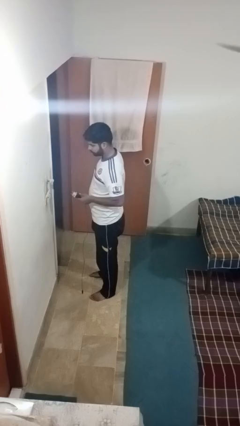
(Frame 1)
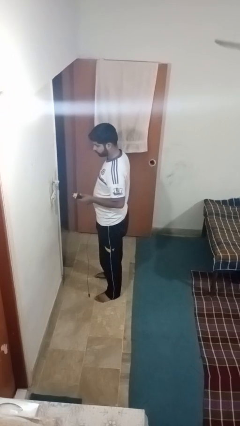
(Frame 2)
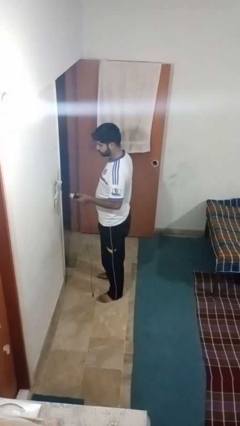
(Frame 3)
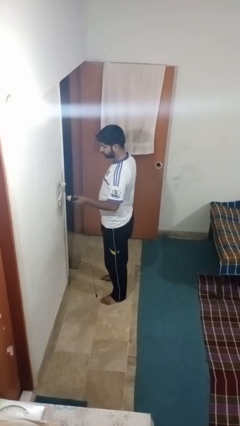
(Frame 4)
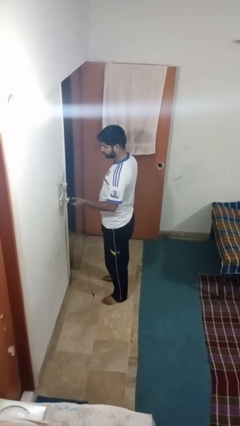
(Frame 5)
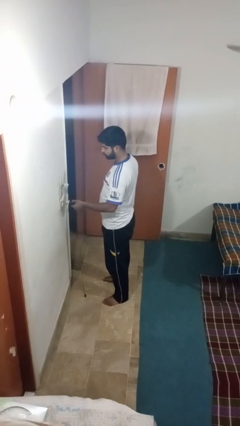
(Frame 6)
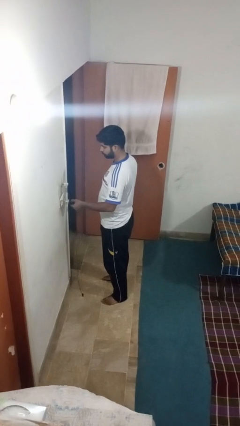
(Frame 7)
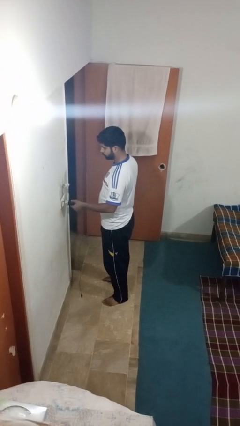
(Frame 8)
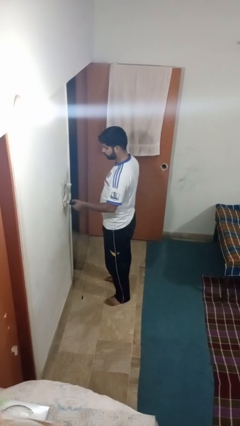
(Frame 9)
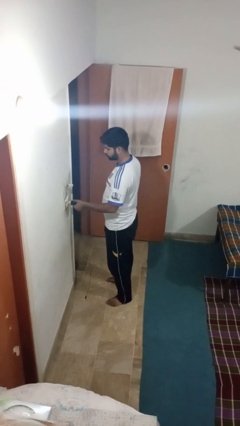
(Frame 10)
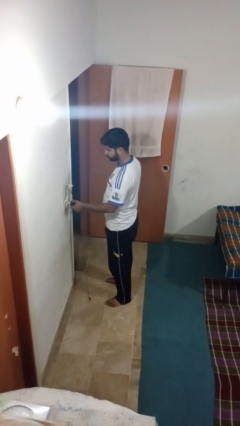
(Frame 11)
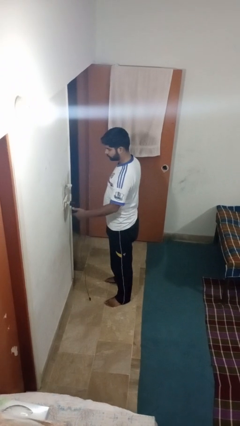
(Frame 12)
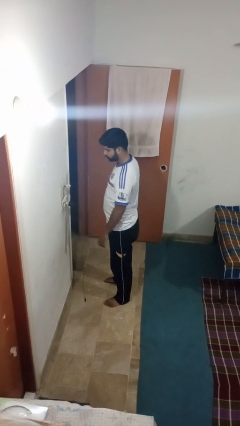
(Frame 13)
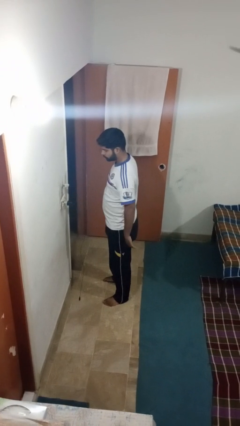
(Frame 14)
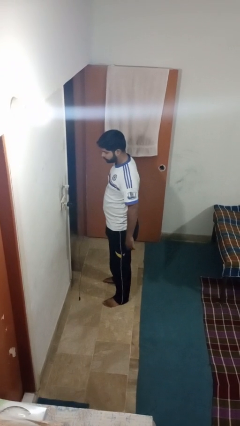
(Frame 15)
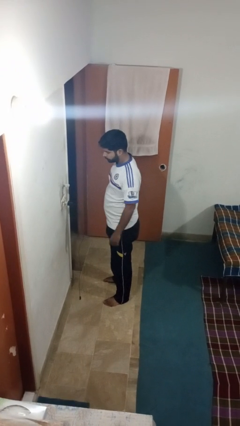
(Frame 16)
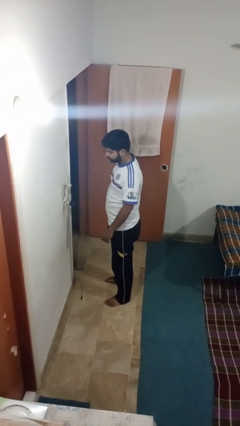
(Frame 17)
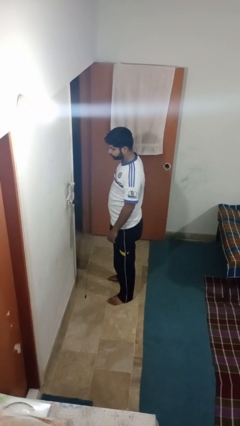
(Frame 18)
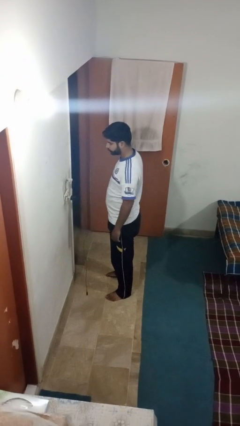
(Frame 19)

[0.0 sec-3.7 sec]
person plugs into electrical socket

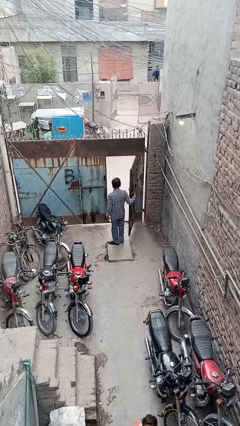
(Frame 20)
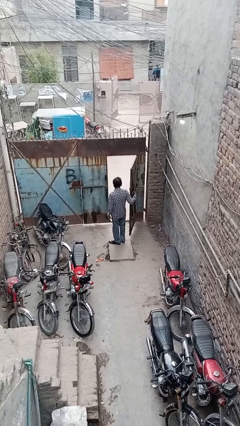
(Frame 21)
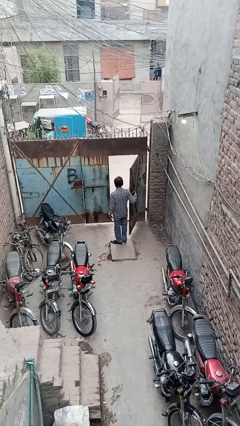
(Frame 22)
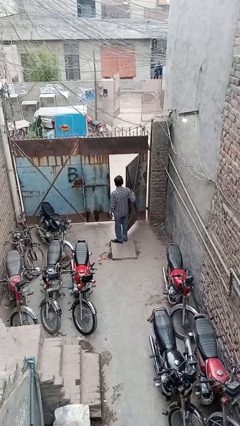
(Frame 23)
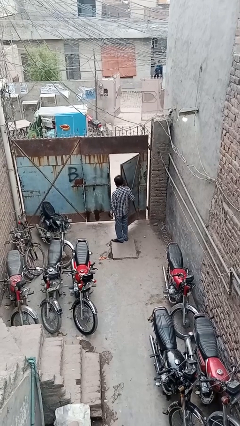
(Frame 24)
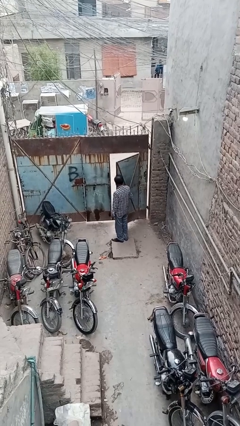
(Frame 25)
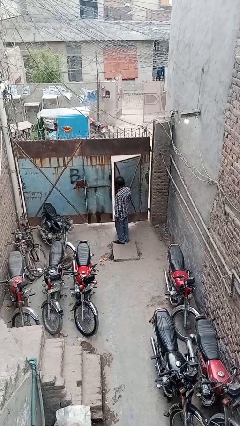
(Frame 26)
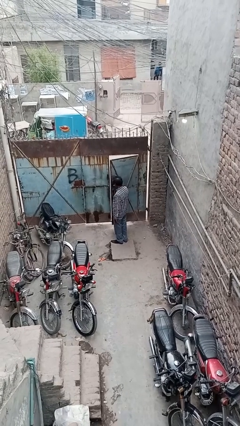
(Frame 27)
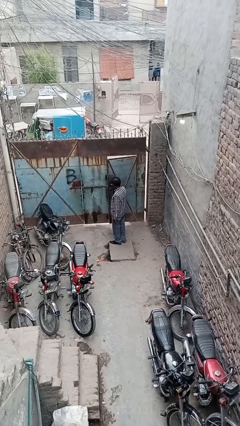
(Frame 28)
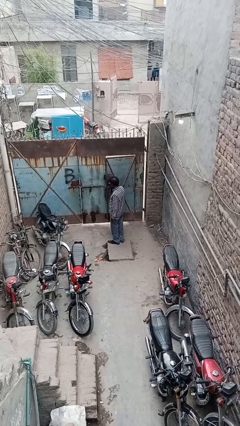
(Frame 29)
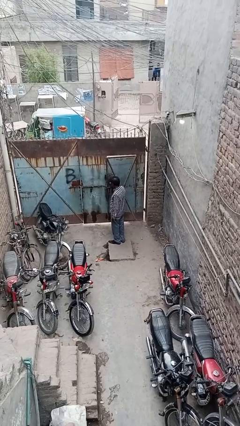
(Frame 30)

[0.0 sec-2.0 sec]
person closes facility door

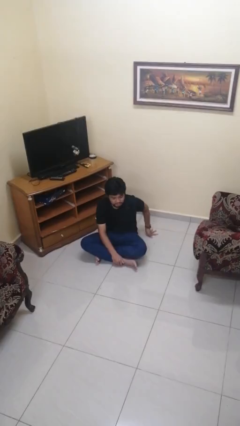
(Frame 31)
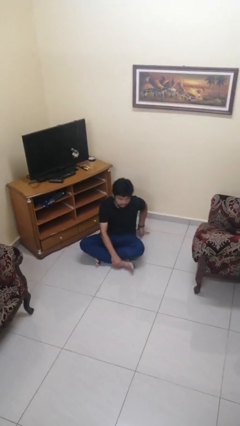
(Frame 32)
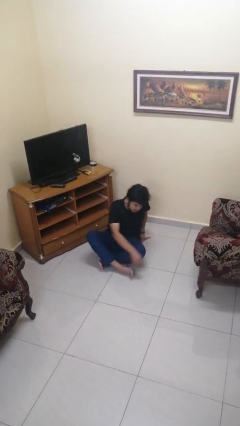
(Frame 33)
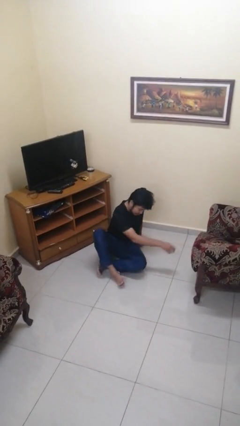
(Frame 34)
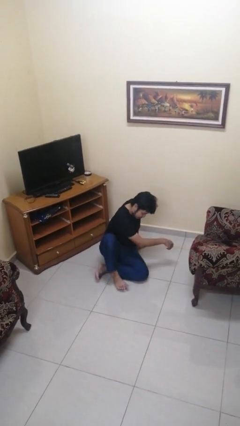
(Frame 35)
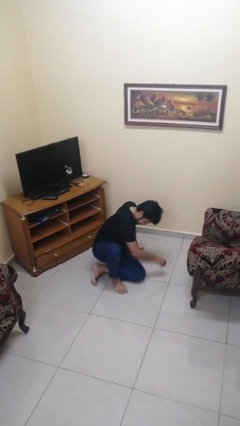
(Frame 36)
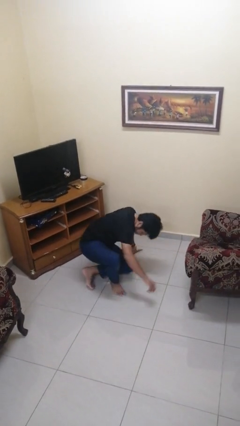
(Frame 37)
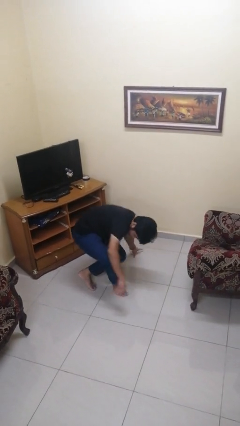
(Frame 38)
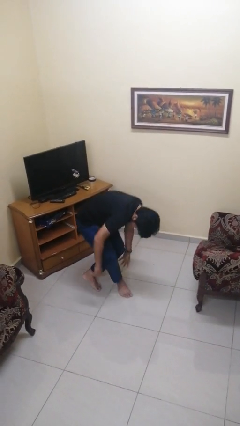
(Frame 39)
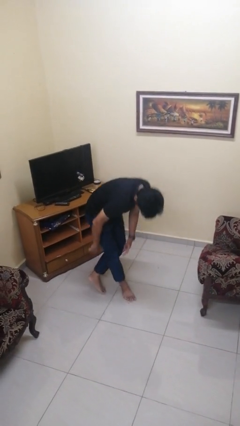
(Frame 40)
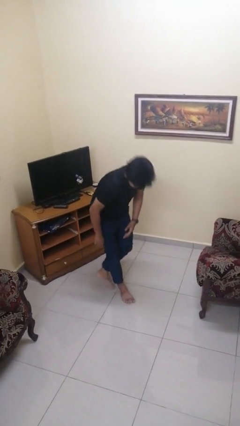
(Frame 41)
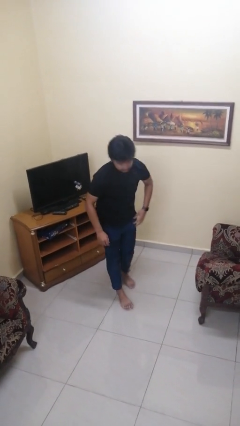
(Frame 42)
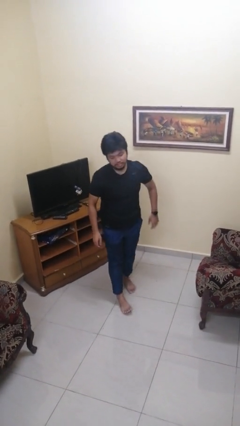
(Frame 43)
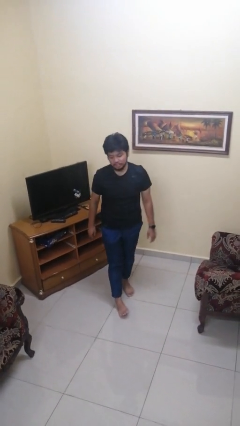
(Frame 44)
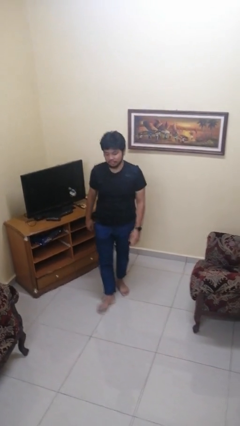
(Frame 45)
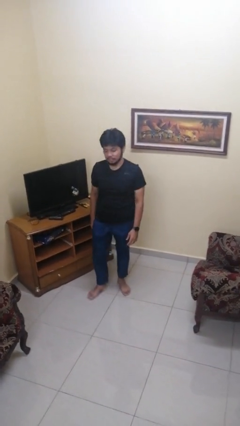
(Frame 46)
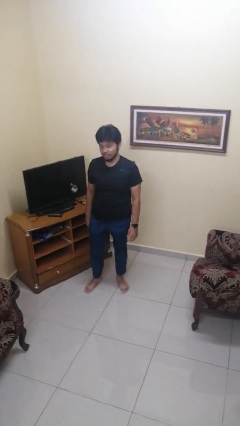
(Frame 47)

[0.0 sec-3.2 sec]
person stands up from floor

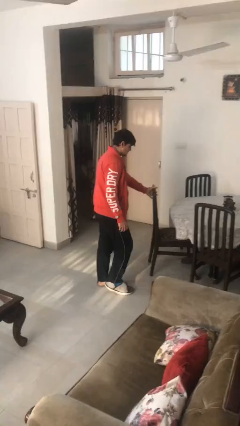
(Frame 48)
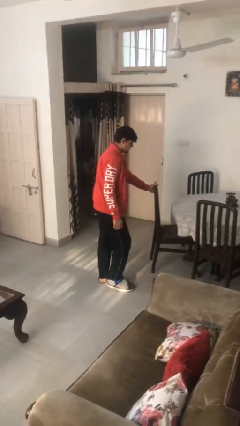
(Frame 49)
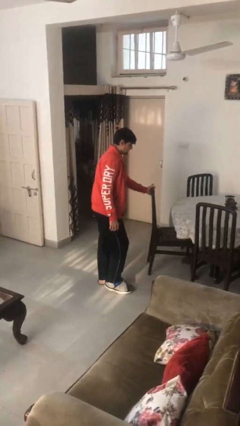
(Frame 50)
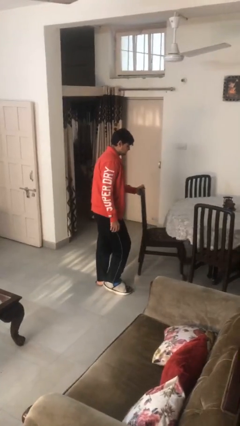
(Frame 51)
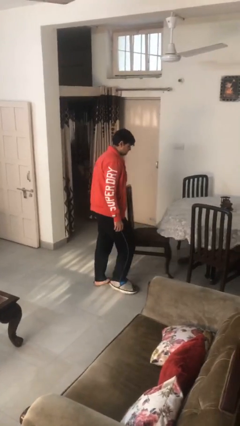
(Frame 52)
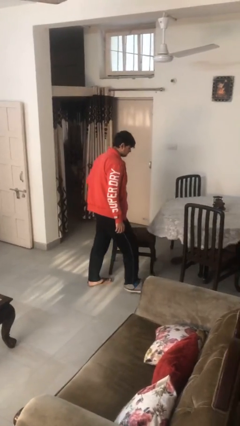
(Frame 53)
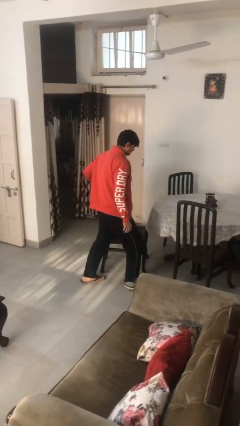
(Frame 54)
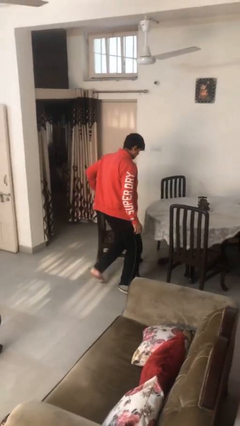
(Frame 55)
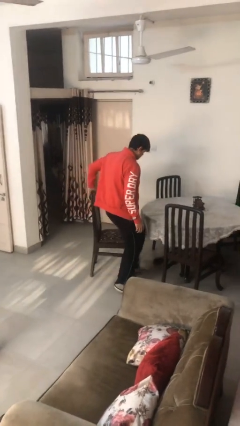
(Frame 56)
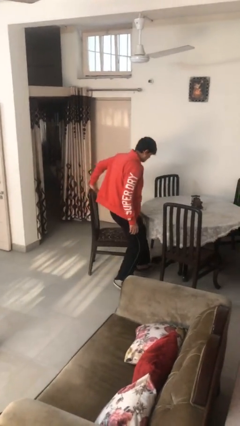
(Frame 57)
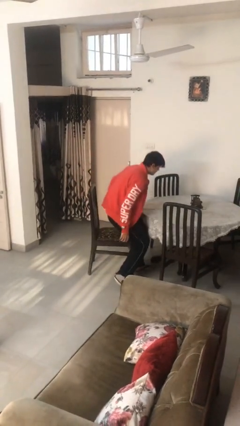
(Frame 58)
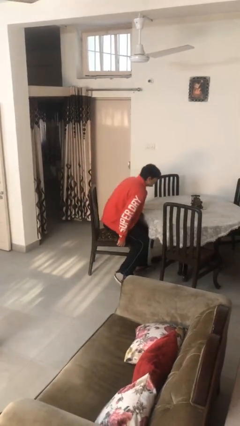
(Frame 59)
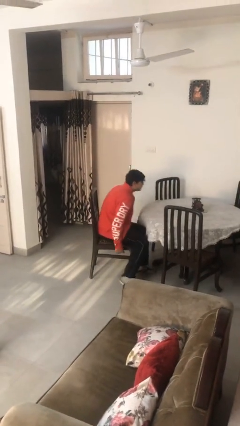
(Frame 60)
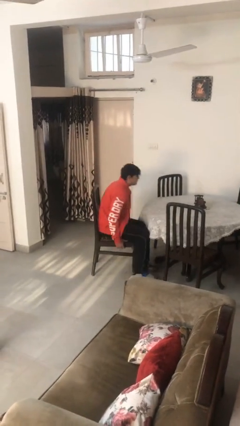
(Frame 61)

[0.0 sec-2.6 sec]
person sits down

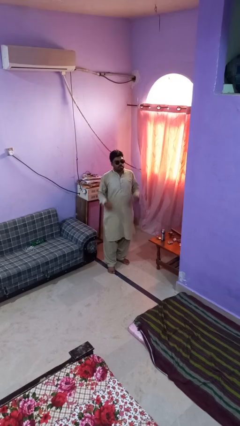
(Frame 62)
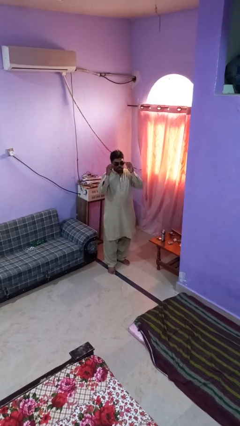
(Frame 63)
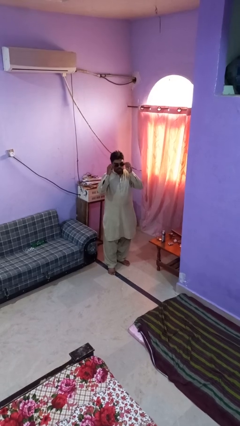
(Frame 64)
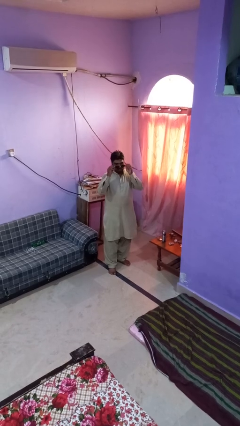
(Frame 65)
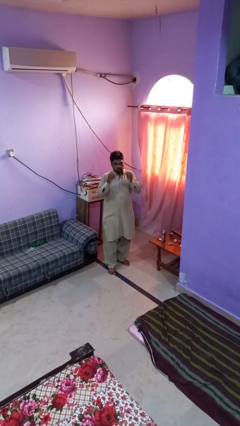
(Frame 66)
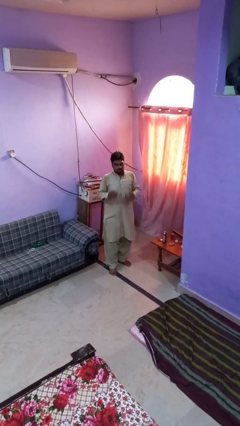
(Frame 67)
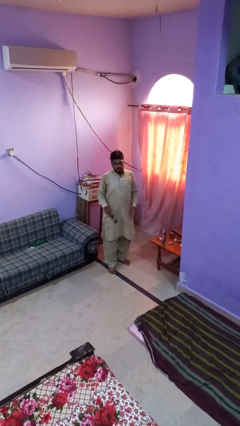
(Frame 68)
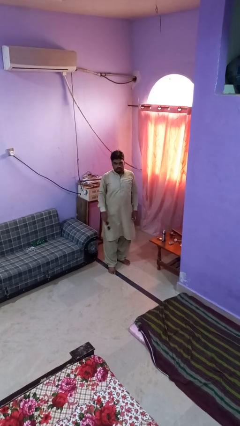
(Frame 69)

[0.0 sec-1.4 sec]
person takes off sunglasses

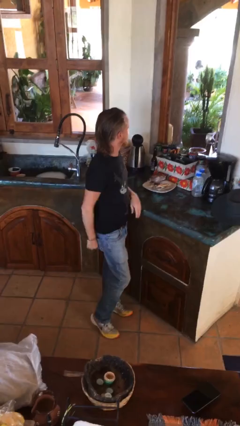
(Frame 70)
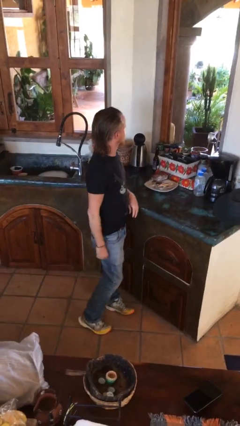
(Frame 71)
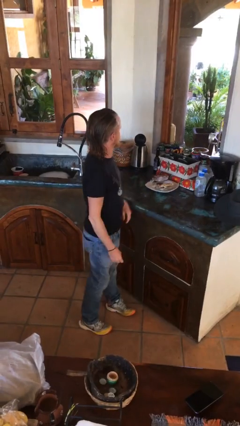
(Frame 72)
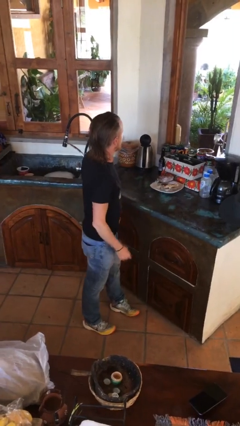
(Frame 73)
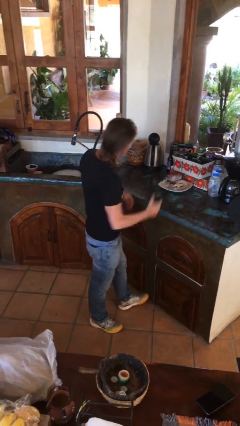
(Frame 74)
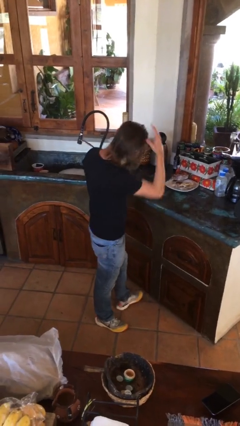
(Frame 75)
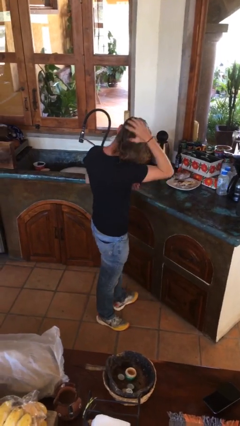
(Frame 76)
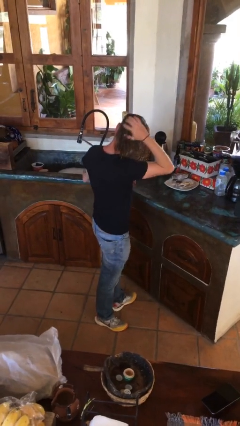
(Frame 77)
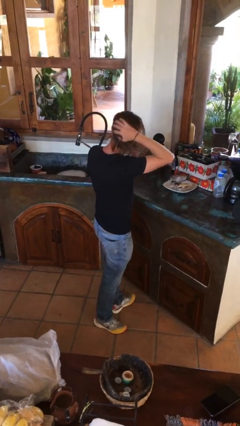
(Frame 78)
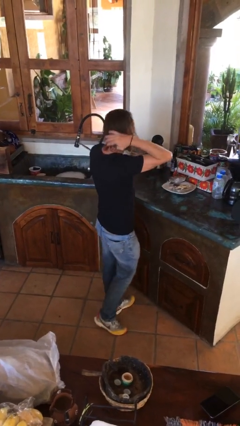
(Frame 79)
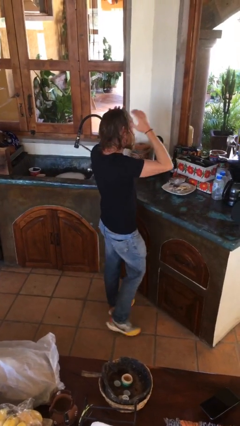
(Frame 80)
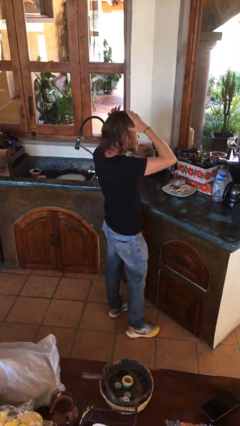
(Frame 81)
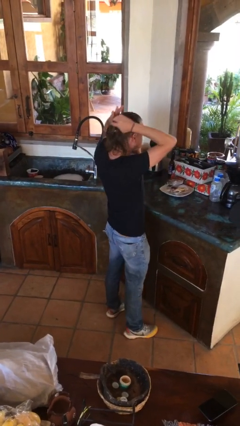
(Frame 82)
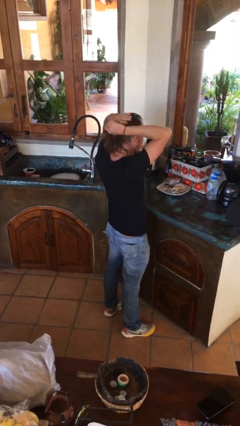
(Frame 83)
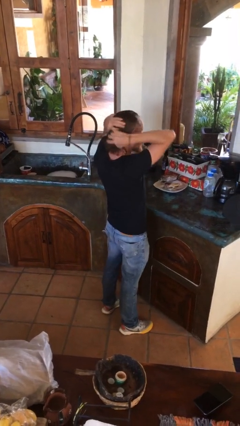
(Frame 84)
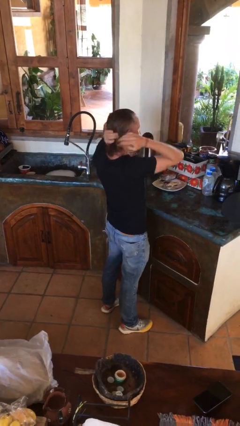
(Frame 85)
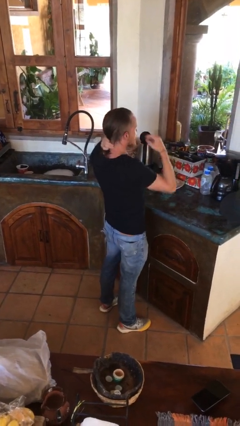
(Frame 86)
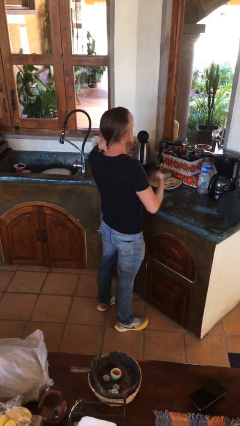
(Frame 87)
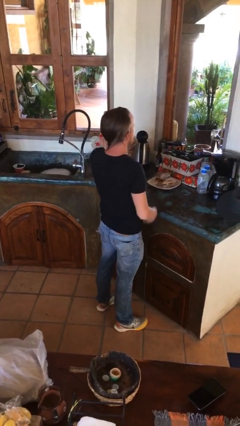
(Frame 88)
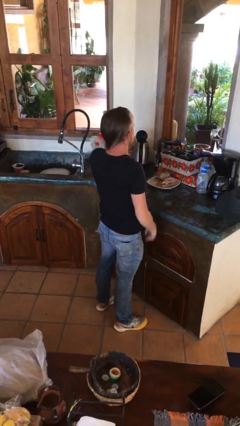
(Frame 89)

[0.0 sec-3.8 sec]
person strokes hair

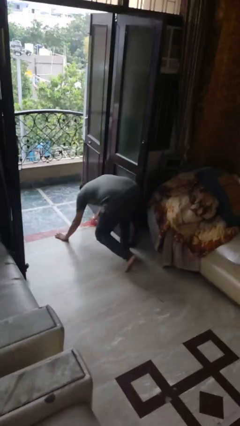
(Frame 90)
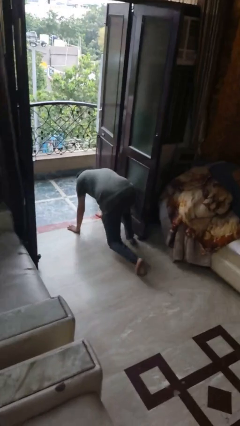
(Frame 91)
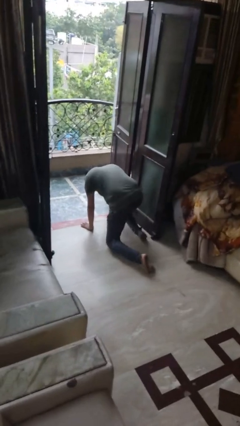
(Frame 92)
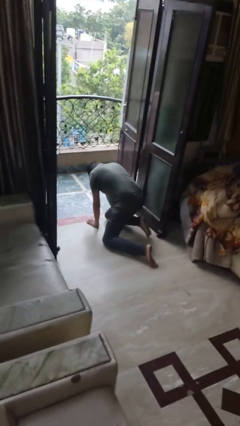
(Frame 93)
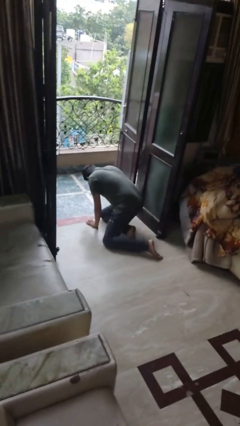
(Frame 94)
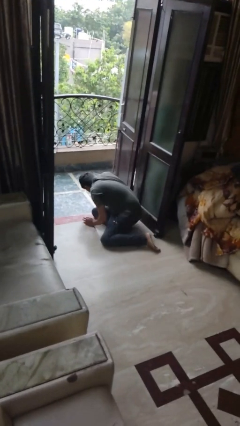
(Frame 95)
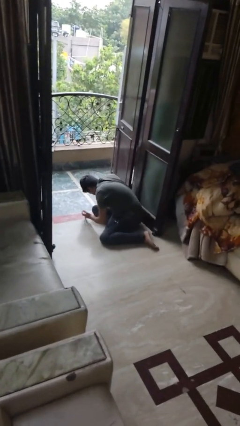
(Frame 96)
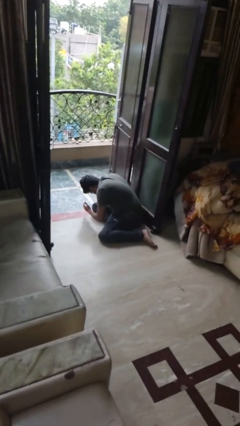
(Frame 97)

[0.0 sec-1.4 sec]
person lies down on floor
